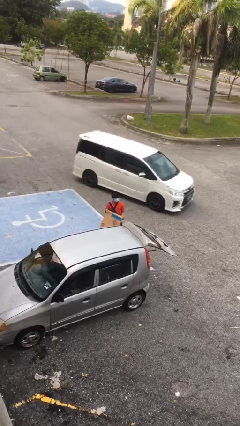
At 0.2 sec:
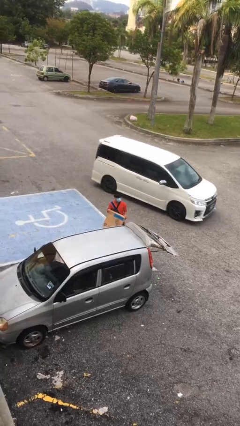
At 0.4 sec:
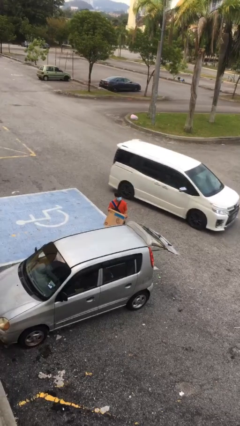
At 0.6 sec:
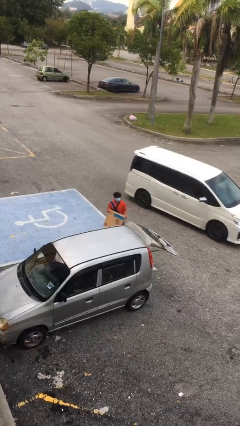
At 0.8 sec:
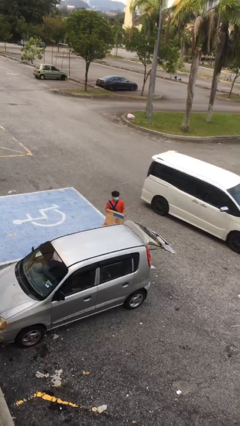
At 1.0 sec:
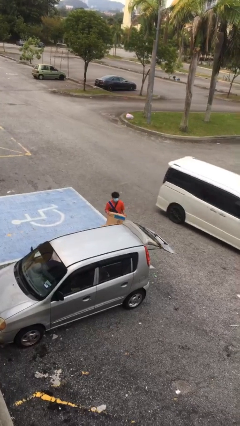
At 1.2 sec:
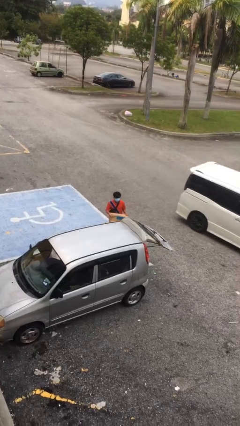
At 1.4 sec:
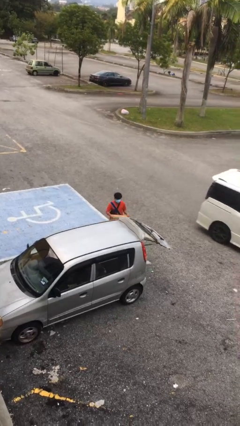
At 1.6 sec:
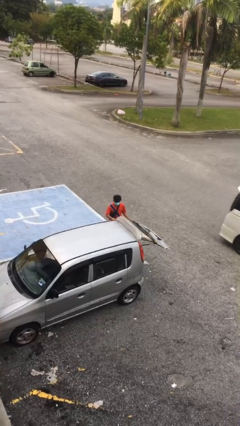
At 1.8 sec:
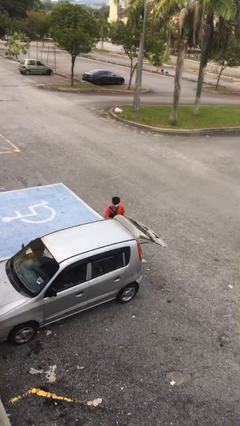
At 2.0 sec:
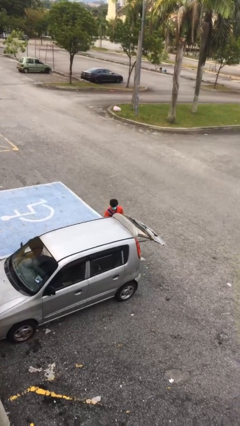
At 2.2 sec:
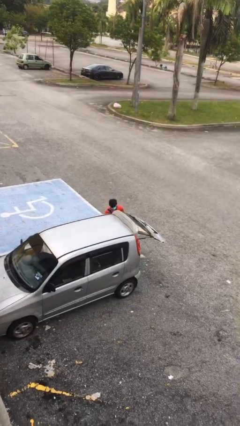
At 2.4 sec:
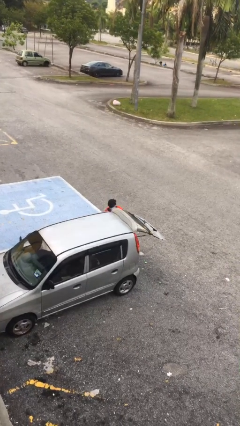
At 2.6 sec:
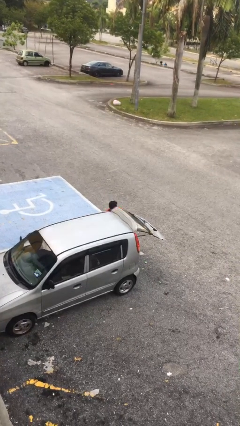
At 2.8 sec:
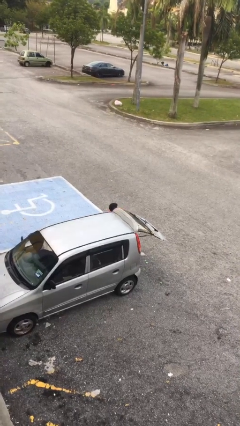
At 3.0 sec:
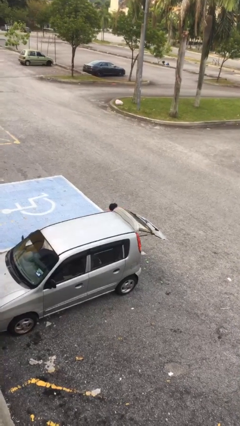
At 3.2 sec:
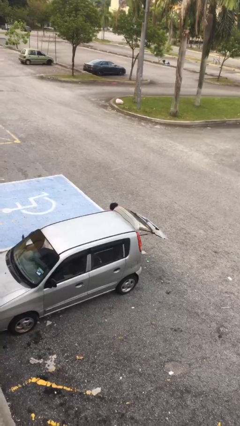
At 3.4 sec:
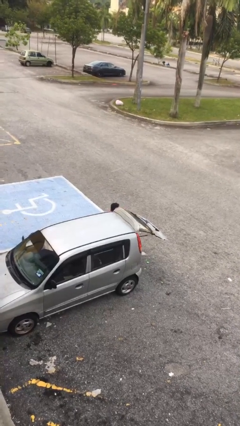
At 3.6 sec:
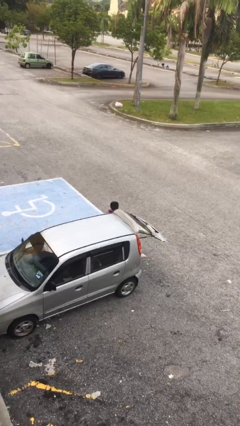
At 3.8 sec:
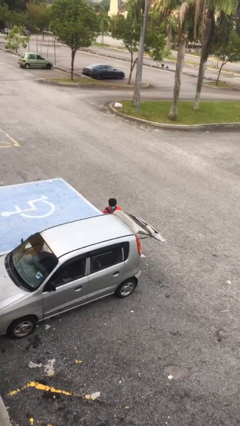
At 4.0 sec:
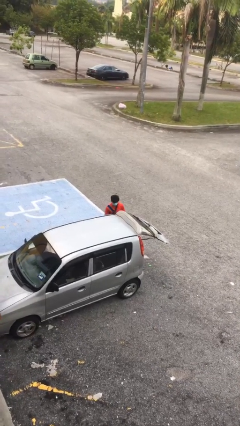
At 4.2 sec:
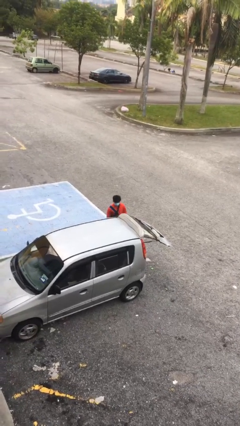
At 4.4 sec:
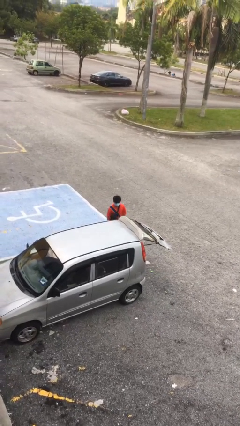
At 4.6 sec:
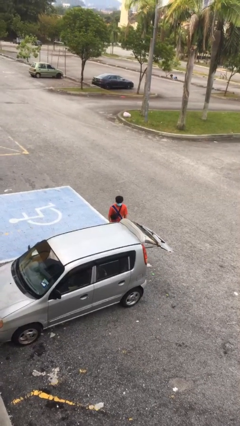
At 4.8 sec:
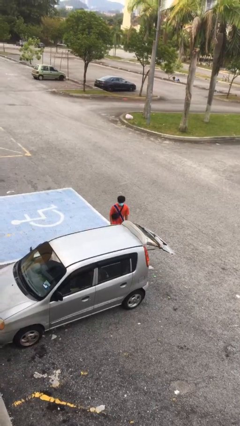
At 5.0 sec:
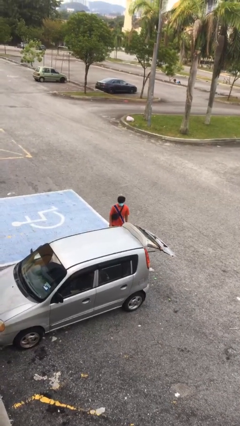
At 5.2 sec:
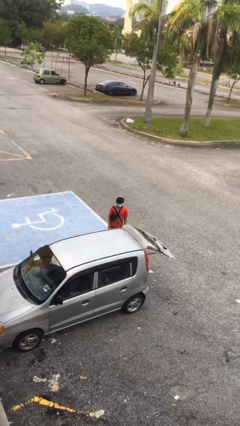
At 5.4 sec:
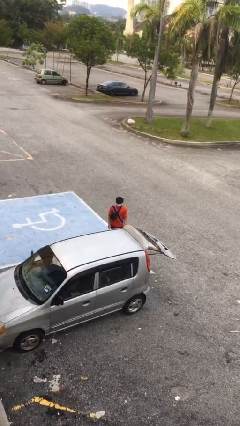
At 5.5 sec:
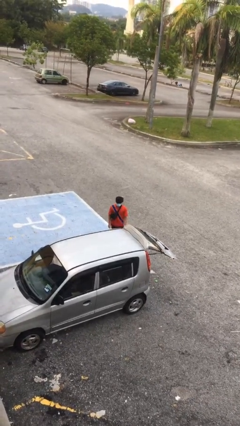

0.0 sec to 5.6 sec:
person loads car

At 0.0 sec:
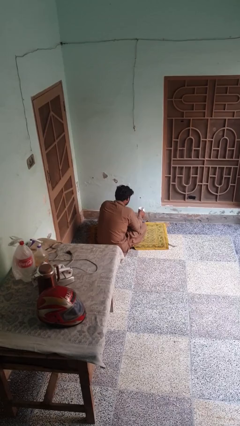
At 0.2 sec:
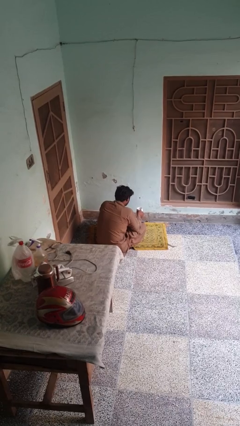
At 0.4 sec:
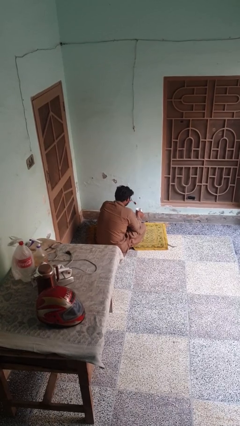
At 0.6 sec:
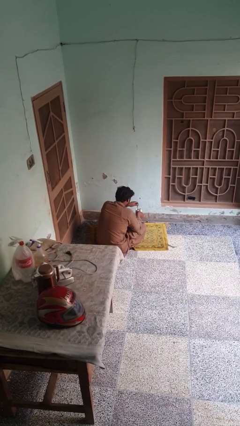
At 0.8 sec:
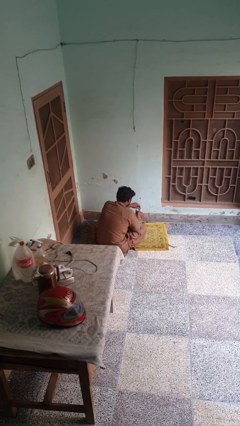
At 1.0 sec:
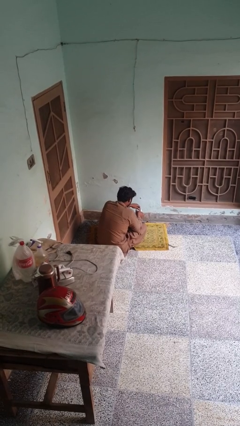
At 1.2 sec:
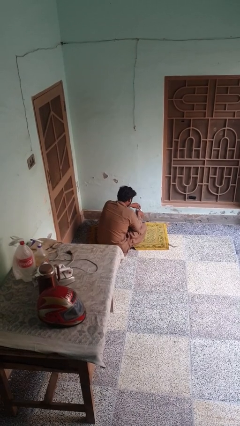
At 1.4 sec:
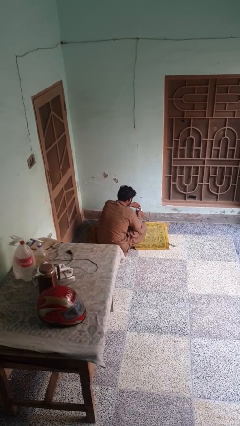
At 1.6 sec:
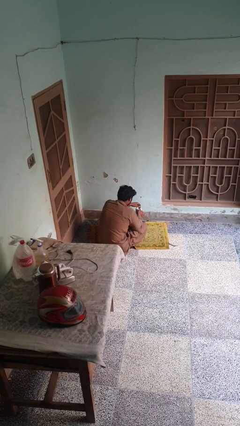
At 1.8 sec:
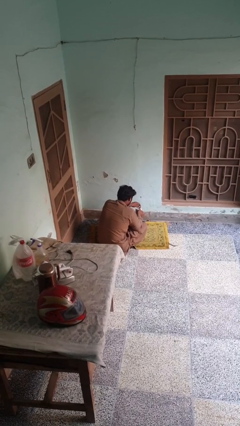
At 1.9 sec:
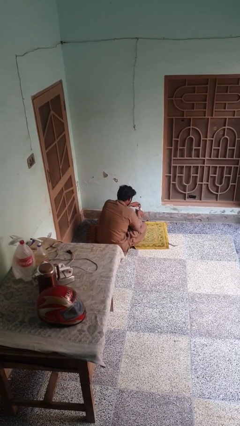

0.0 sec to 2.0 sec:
person stirs mug

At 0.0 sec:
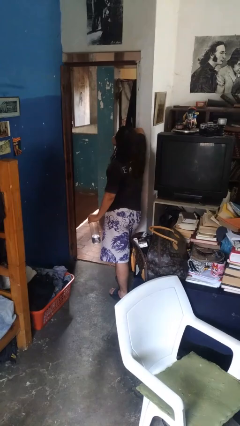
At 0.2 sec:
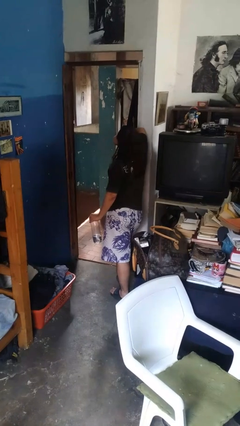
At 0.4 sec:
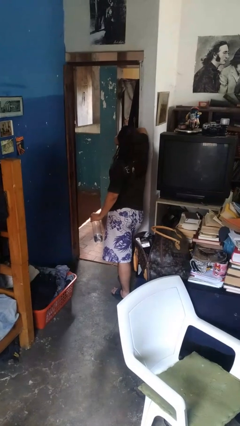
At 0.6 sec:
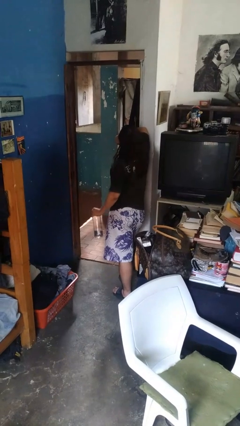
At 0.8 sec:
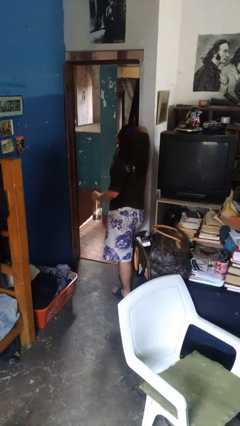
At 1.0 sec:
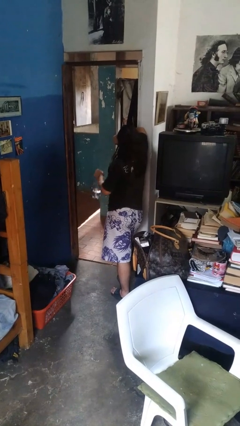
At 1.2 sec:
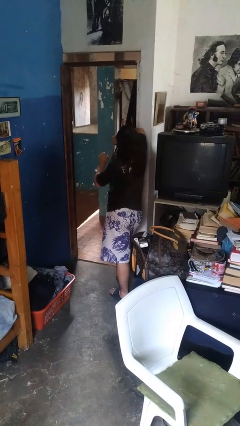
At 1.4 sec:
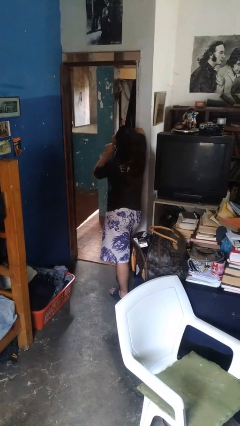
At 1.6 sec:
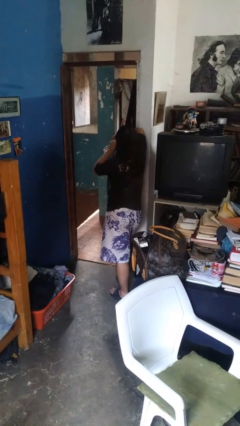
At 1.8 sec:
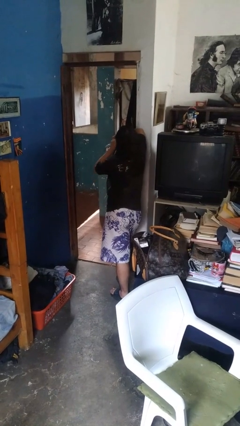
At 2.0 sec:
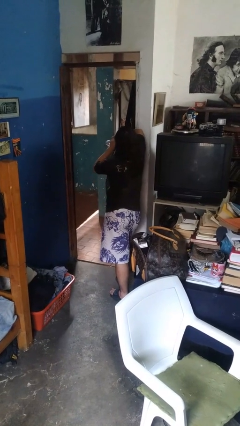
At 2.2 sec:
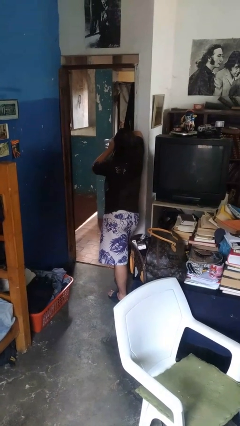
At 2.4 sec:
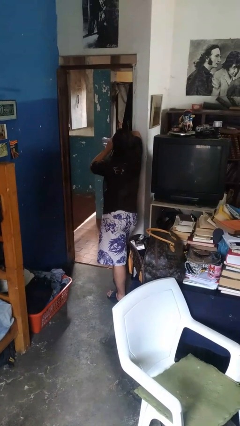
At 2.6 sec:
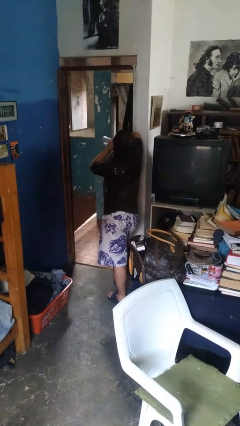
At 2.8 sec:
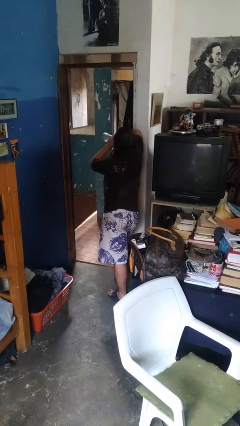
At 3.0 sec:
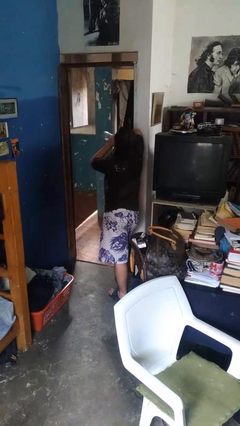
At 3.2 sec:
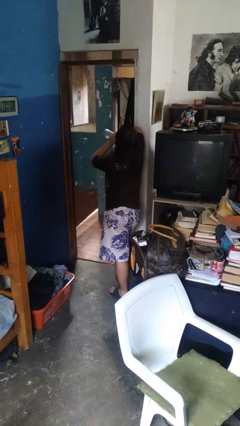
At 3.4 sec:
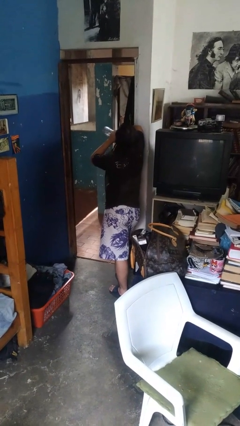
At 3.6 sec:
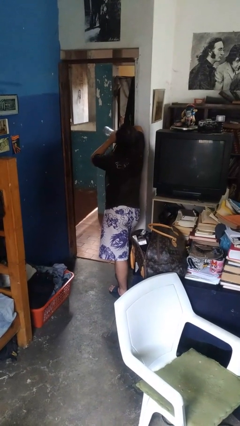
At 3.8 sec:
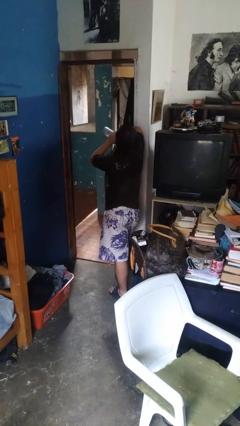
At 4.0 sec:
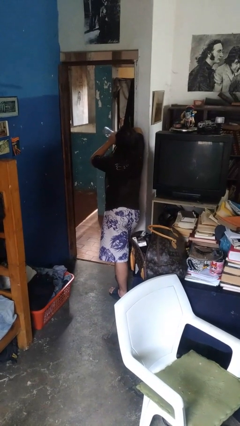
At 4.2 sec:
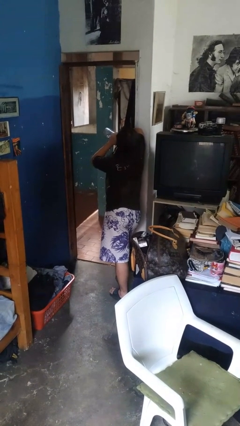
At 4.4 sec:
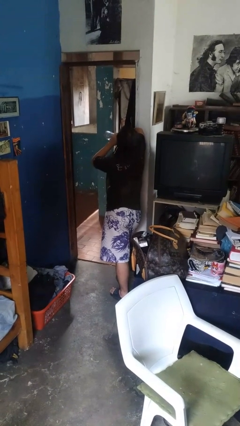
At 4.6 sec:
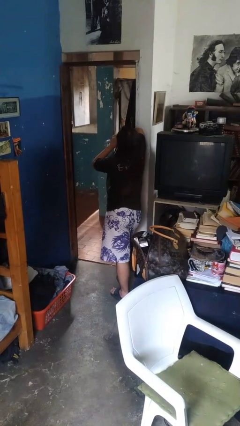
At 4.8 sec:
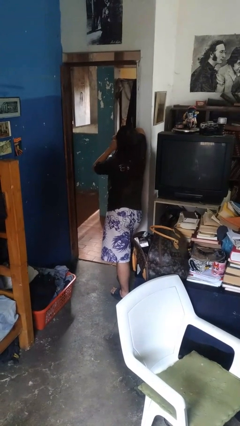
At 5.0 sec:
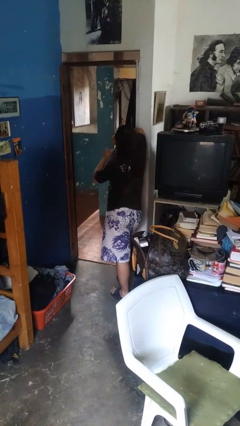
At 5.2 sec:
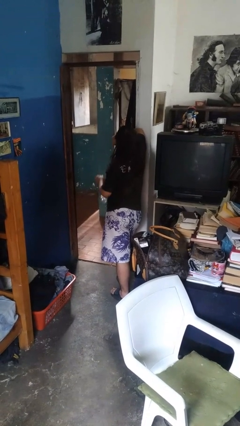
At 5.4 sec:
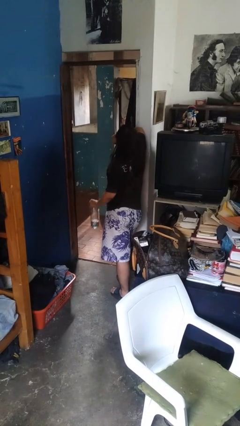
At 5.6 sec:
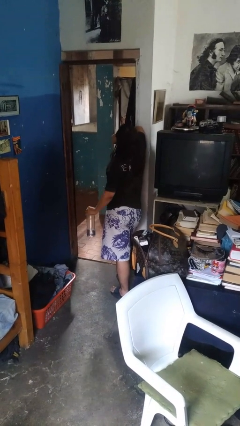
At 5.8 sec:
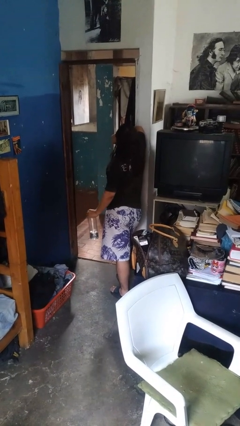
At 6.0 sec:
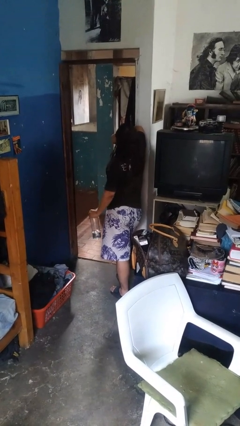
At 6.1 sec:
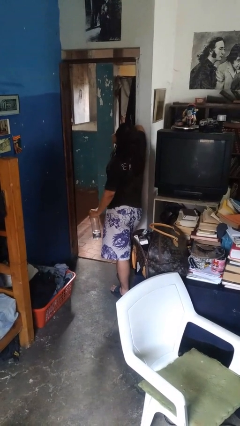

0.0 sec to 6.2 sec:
person drinks from bottle

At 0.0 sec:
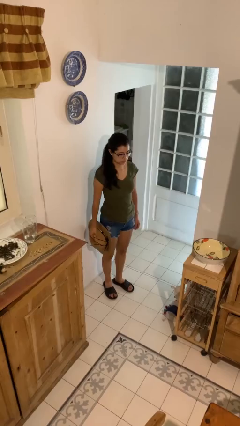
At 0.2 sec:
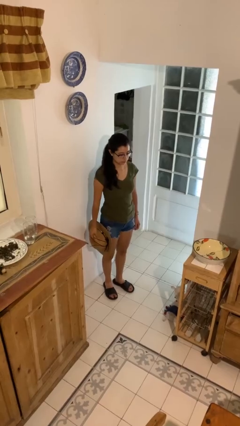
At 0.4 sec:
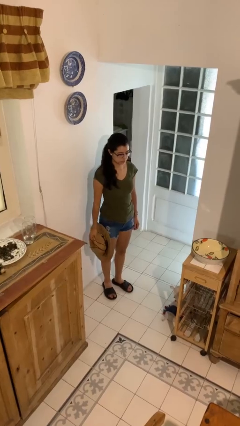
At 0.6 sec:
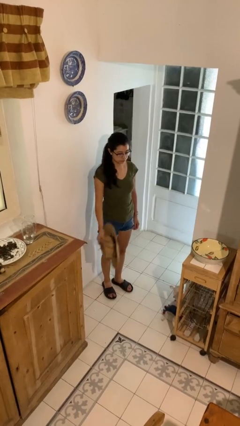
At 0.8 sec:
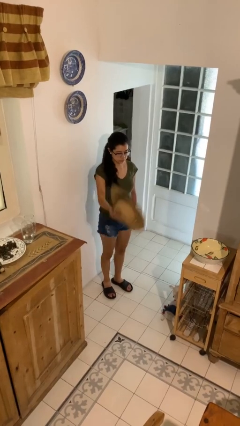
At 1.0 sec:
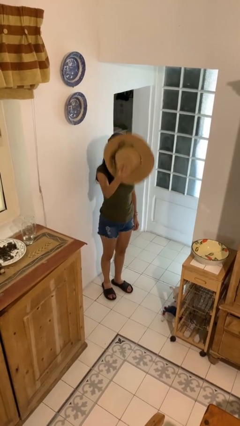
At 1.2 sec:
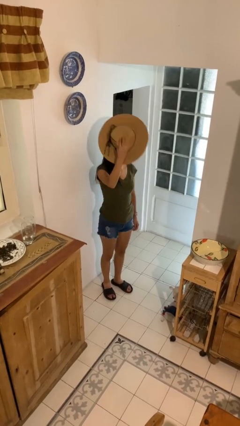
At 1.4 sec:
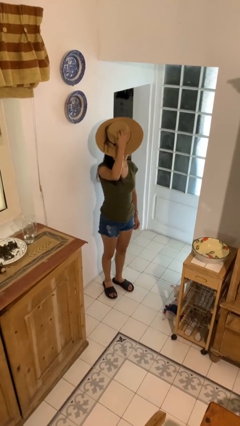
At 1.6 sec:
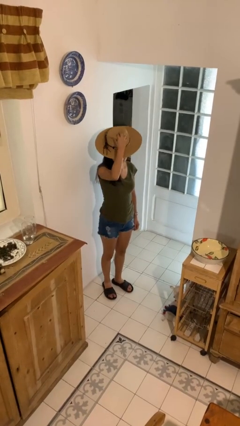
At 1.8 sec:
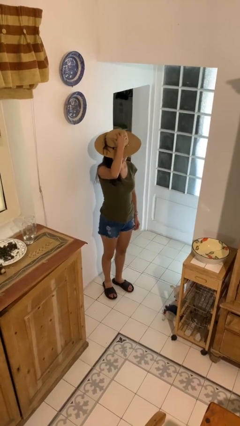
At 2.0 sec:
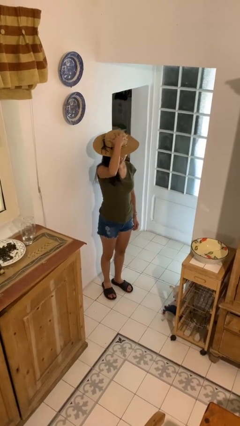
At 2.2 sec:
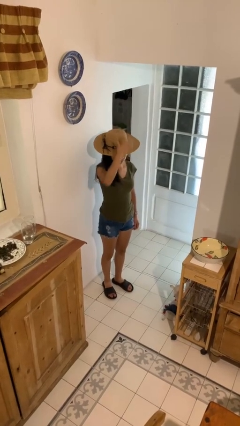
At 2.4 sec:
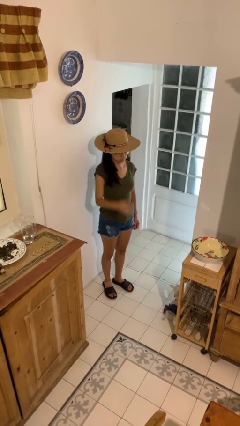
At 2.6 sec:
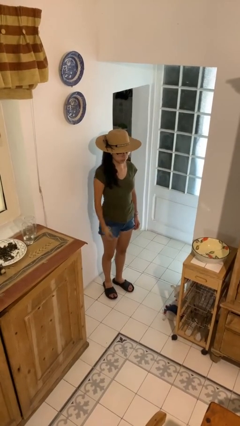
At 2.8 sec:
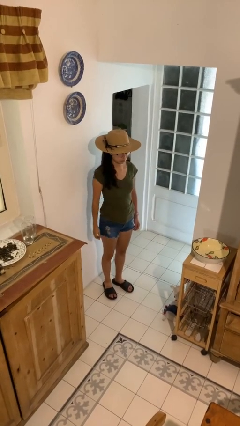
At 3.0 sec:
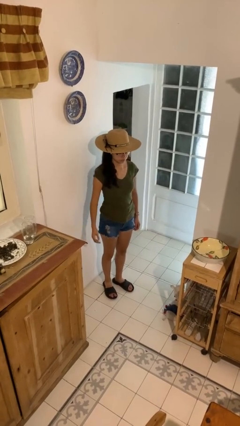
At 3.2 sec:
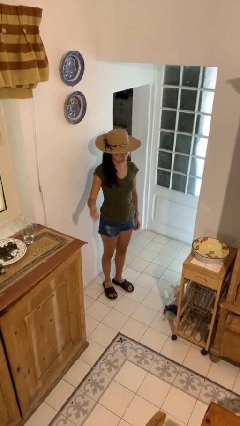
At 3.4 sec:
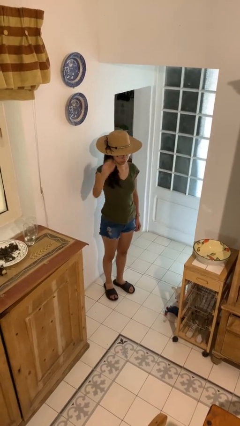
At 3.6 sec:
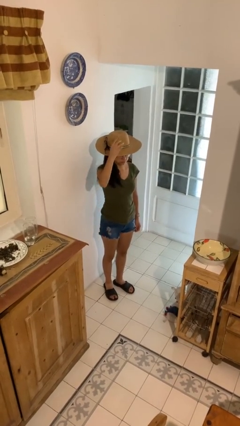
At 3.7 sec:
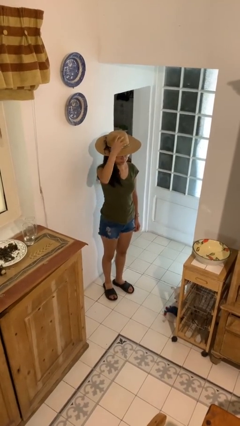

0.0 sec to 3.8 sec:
person puts on hat
